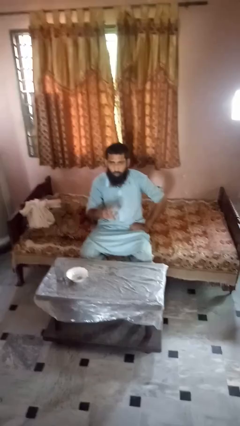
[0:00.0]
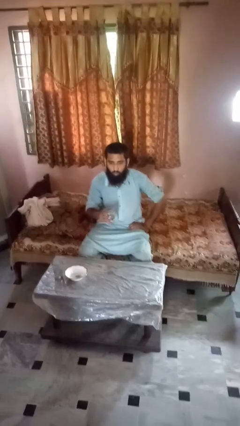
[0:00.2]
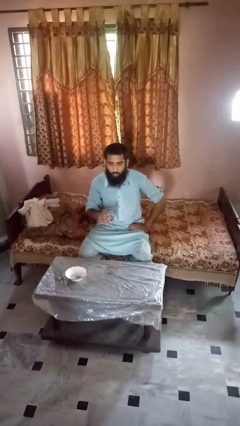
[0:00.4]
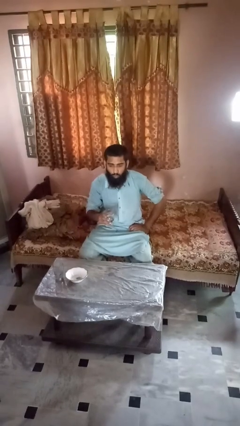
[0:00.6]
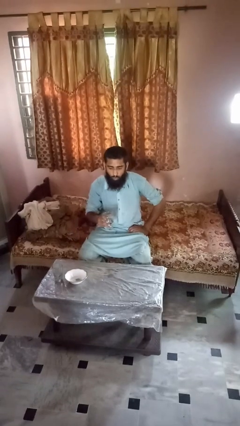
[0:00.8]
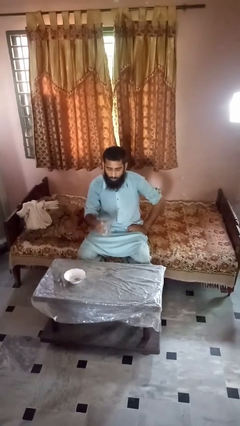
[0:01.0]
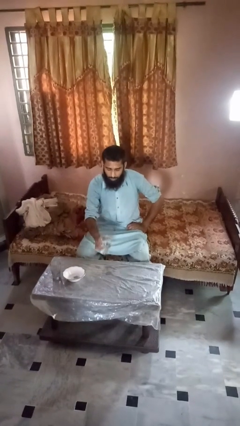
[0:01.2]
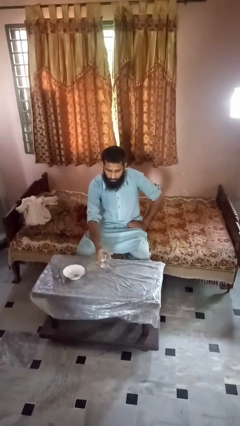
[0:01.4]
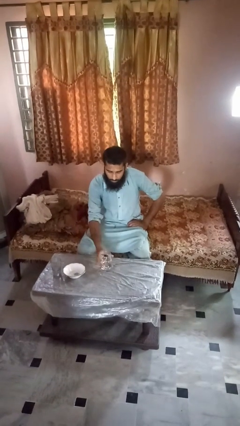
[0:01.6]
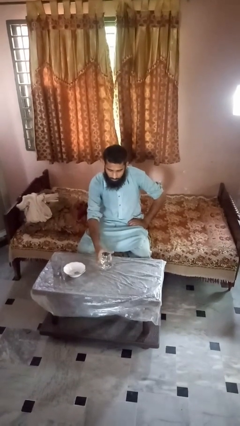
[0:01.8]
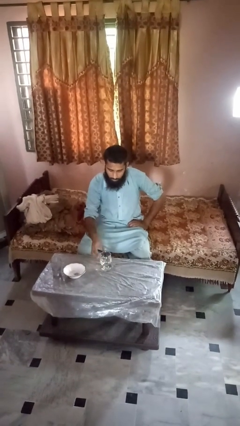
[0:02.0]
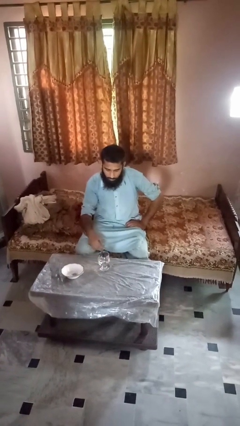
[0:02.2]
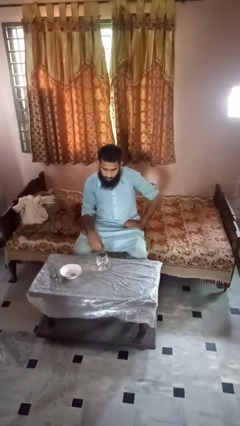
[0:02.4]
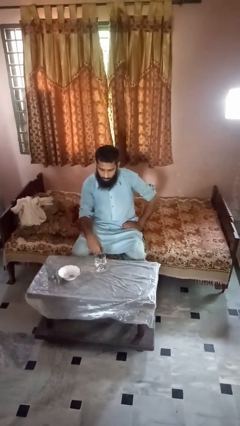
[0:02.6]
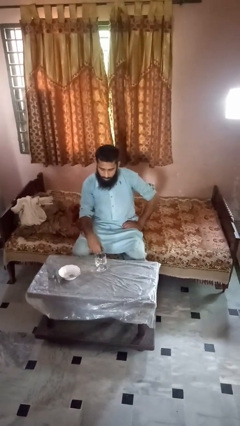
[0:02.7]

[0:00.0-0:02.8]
person puts down object on table

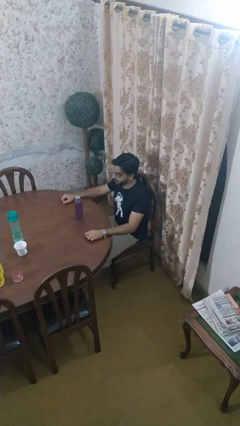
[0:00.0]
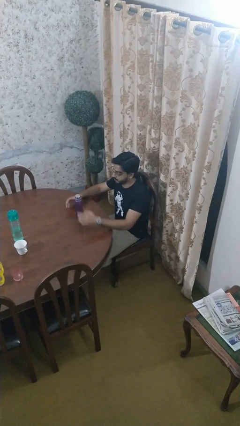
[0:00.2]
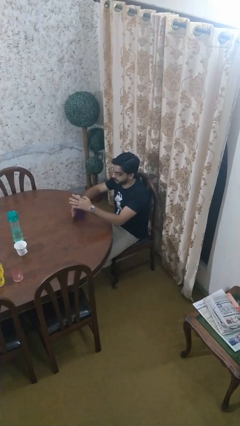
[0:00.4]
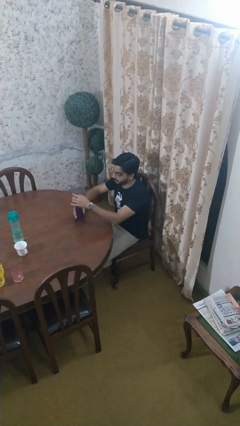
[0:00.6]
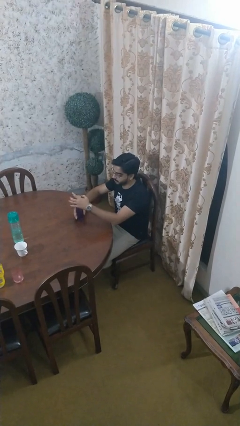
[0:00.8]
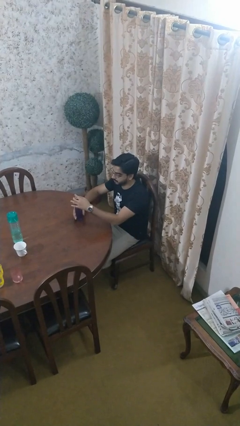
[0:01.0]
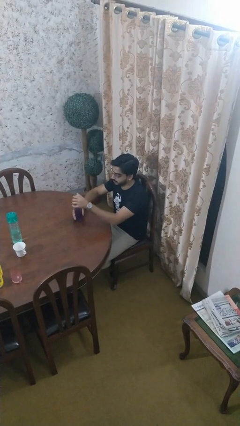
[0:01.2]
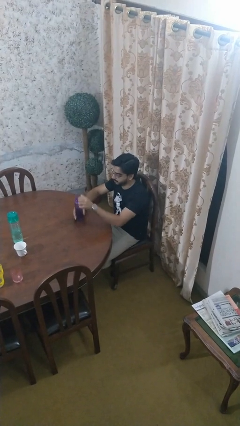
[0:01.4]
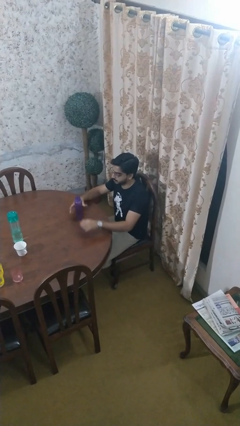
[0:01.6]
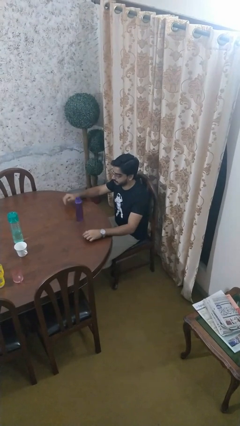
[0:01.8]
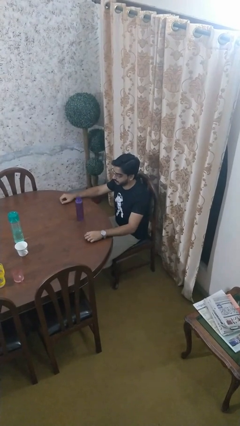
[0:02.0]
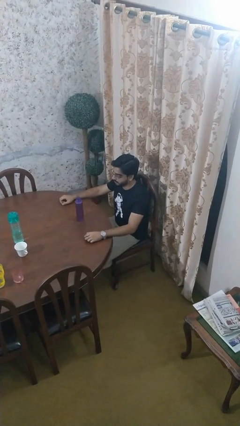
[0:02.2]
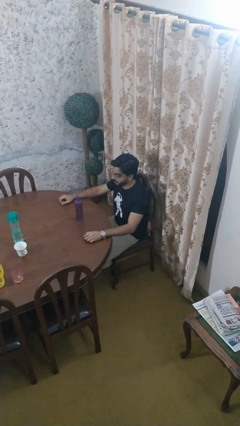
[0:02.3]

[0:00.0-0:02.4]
person unscrews lid from bottle

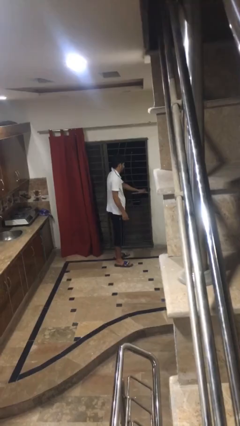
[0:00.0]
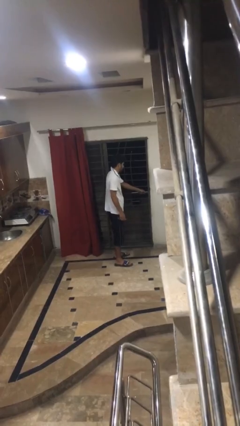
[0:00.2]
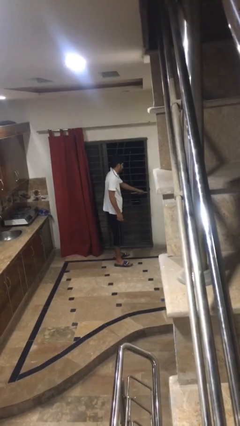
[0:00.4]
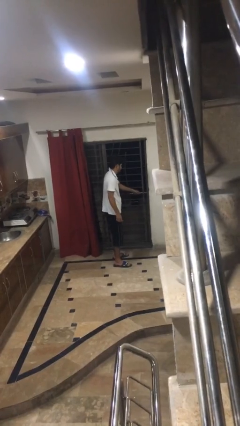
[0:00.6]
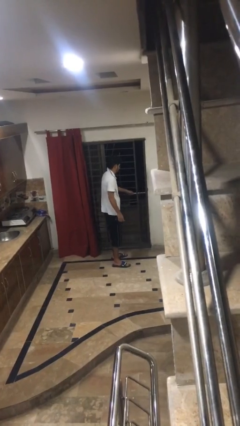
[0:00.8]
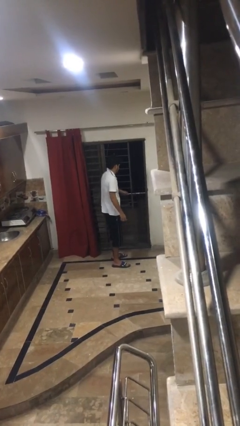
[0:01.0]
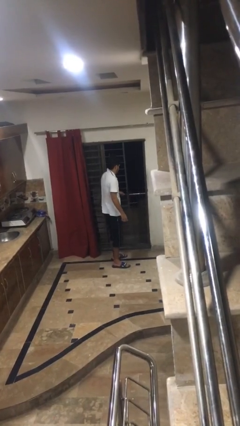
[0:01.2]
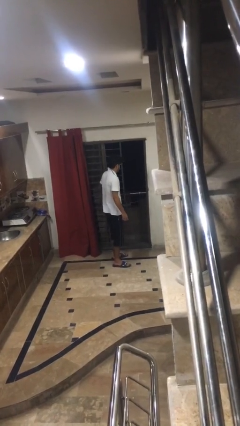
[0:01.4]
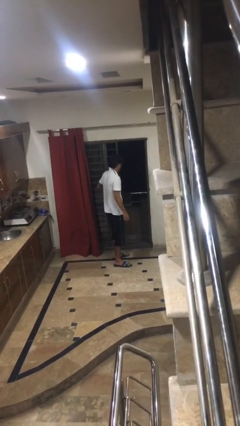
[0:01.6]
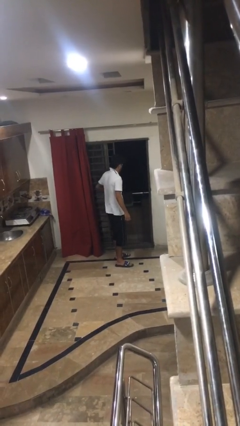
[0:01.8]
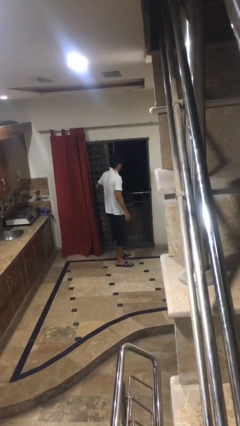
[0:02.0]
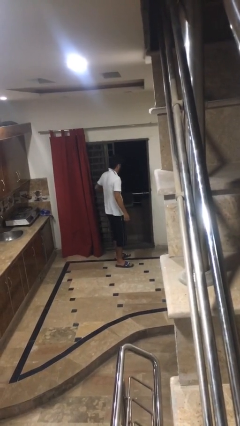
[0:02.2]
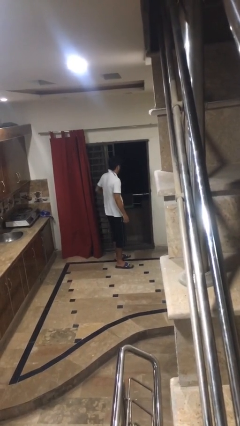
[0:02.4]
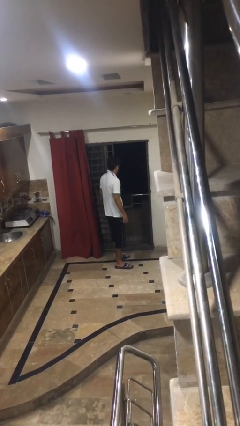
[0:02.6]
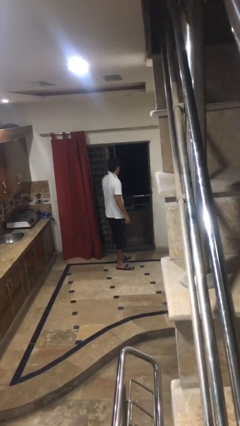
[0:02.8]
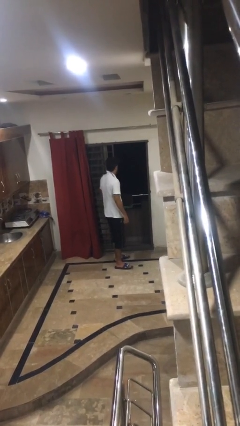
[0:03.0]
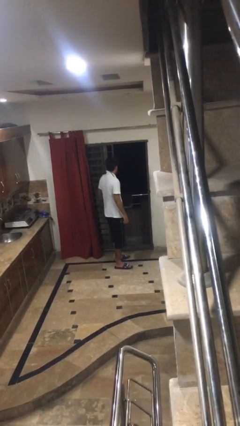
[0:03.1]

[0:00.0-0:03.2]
person opens facility door

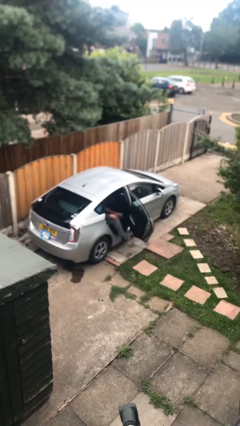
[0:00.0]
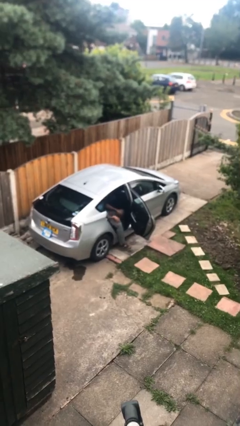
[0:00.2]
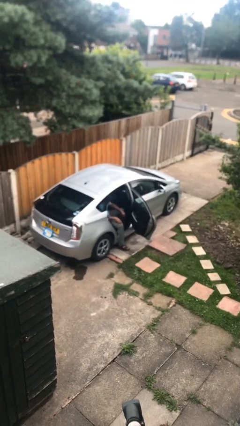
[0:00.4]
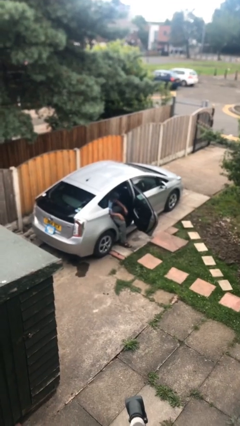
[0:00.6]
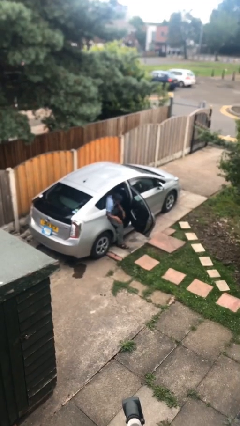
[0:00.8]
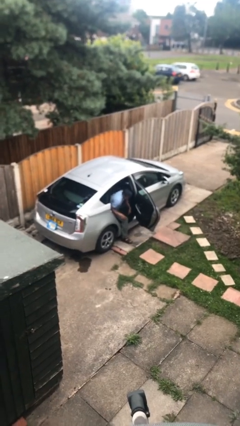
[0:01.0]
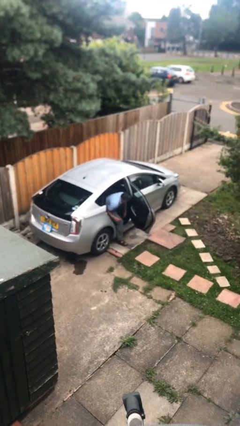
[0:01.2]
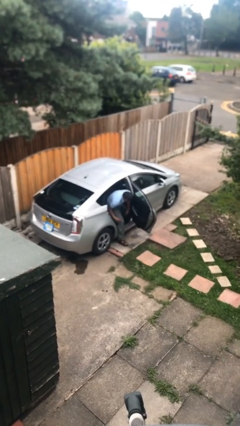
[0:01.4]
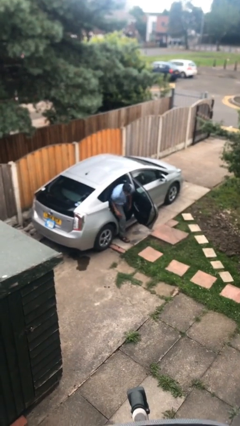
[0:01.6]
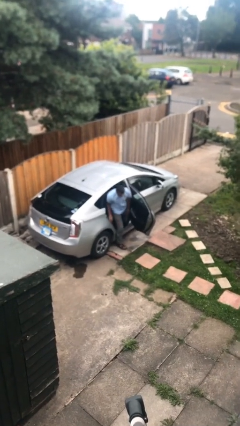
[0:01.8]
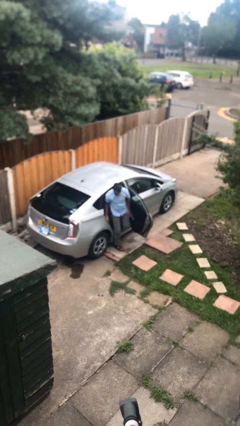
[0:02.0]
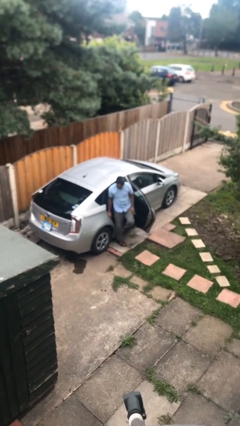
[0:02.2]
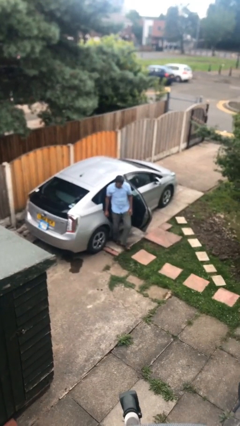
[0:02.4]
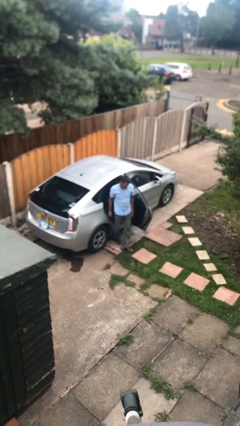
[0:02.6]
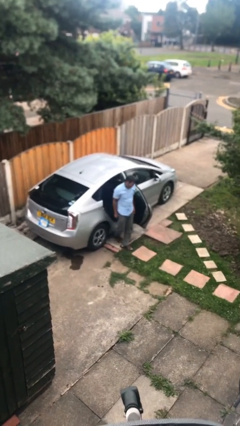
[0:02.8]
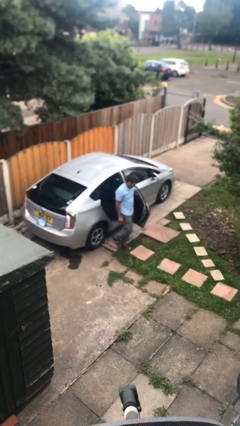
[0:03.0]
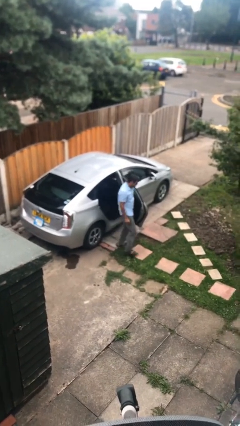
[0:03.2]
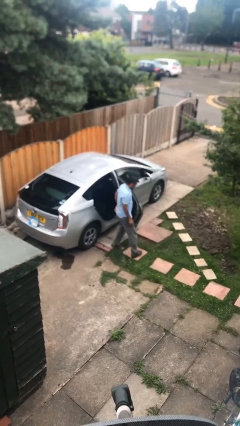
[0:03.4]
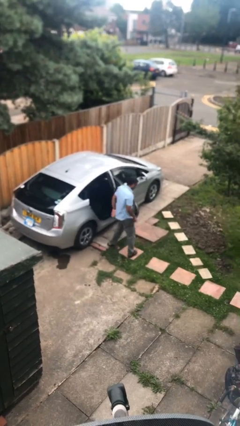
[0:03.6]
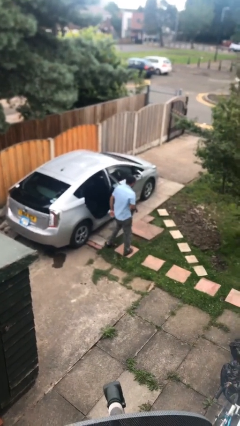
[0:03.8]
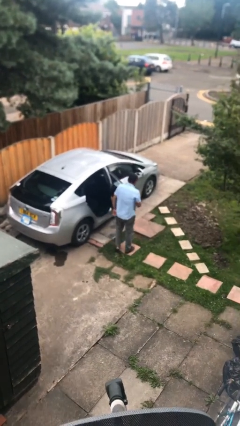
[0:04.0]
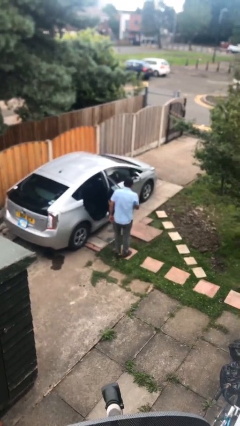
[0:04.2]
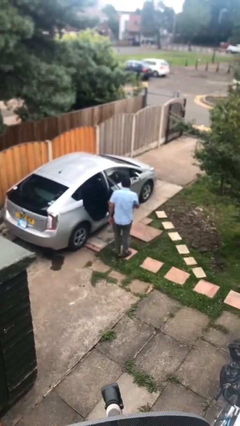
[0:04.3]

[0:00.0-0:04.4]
person exits car

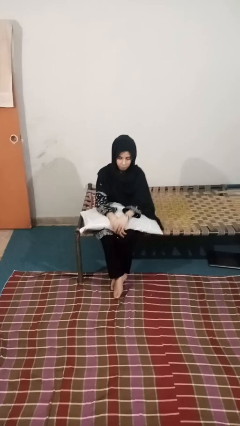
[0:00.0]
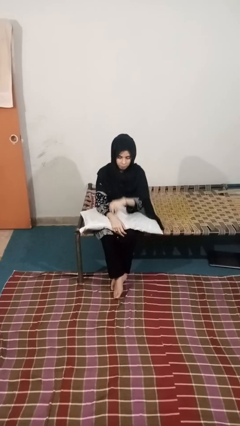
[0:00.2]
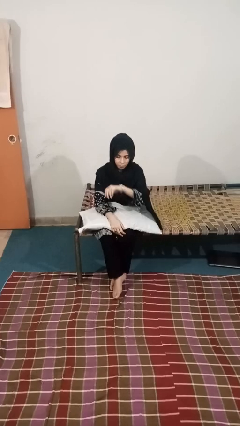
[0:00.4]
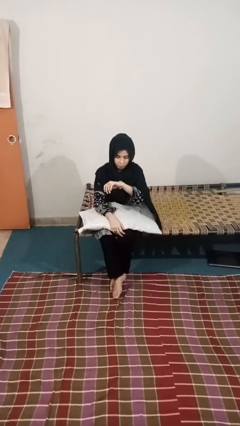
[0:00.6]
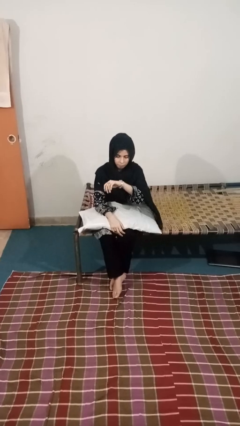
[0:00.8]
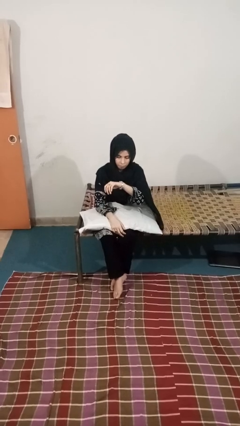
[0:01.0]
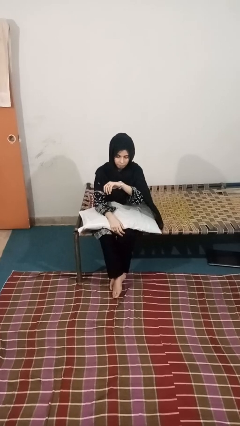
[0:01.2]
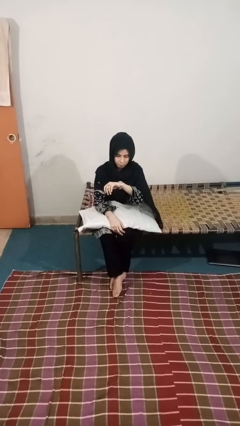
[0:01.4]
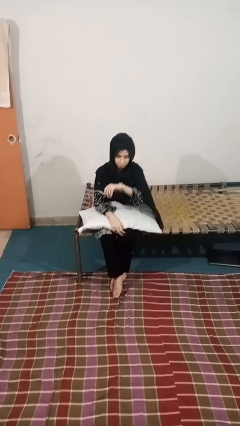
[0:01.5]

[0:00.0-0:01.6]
person looks at wristwatch

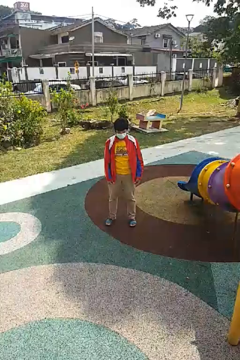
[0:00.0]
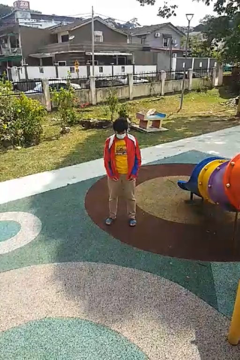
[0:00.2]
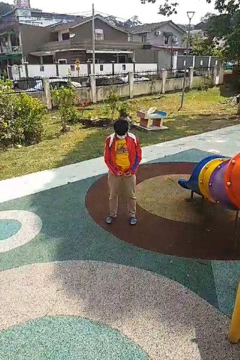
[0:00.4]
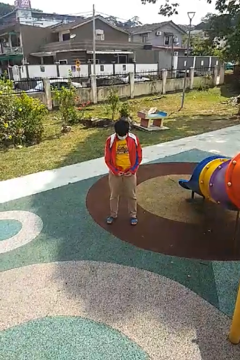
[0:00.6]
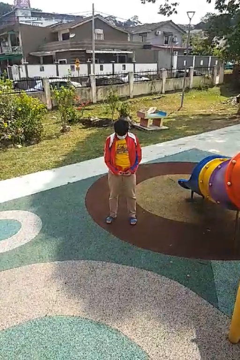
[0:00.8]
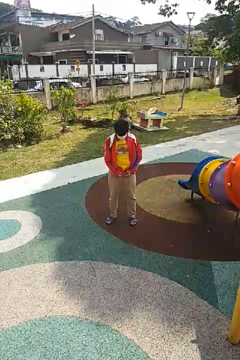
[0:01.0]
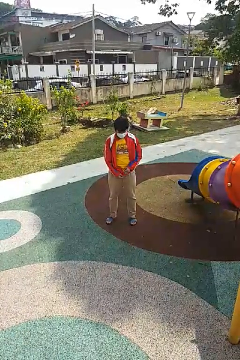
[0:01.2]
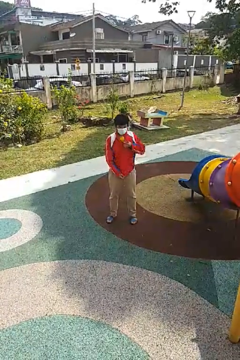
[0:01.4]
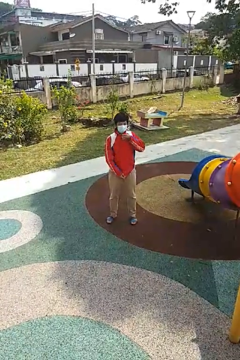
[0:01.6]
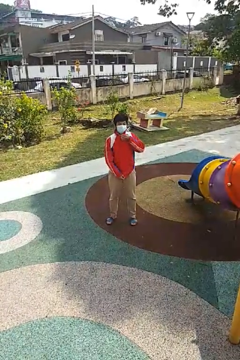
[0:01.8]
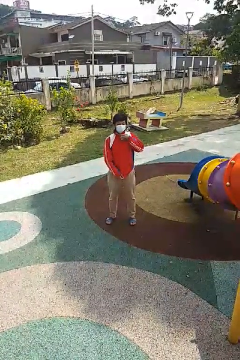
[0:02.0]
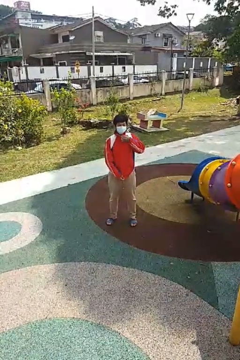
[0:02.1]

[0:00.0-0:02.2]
person zips up jacket

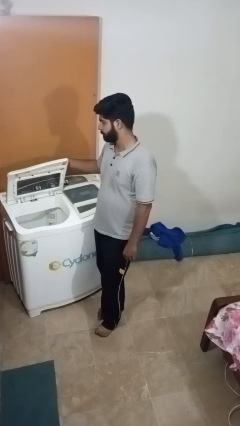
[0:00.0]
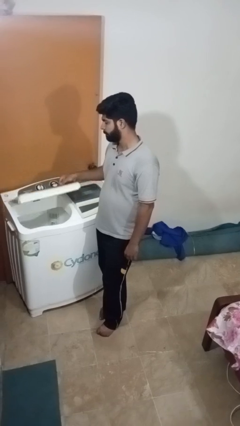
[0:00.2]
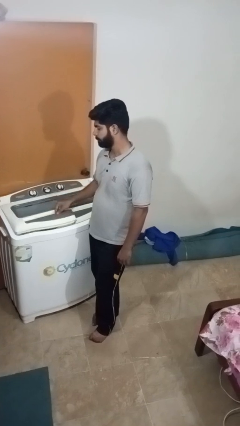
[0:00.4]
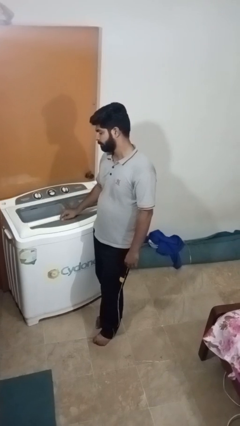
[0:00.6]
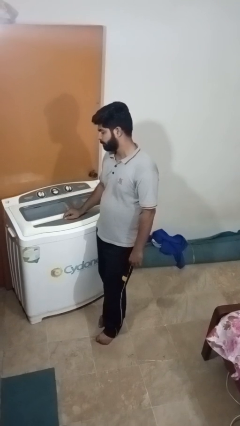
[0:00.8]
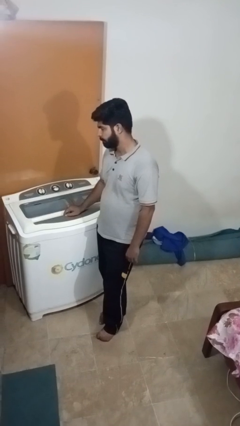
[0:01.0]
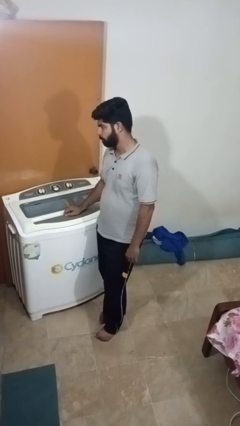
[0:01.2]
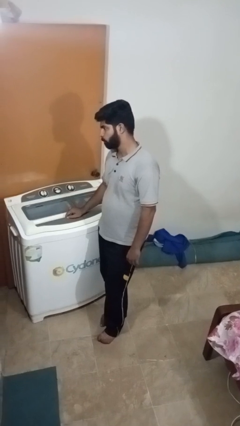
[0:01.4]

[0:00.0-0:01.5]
person closes clothes washer
